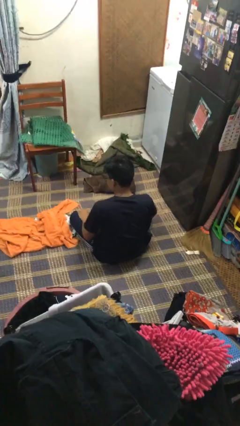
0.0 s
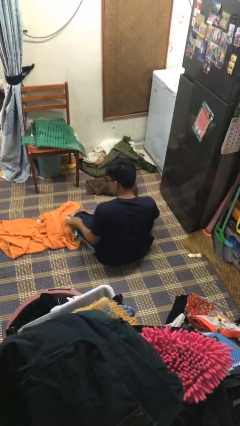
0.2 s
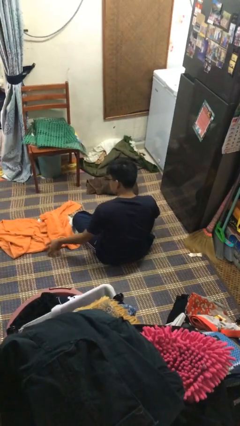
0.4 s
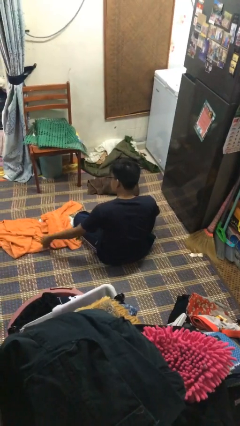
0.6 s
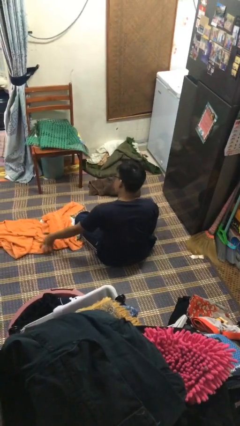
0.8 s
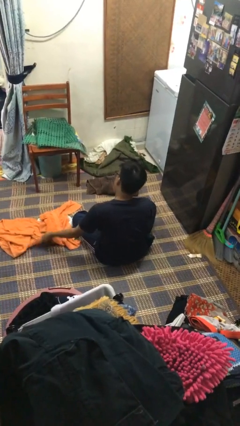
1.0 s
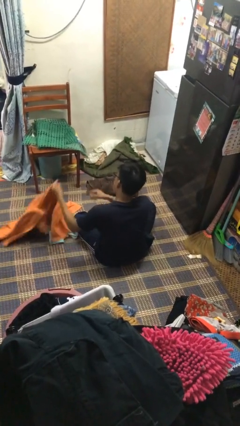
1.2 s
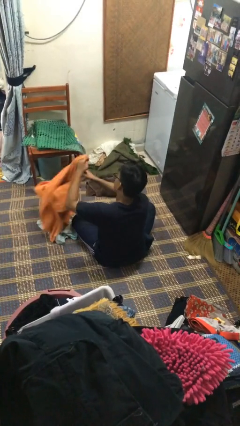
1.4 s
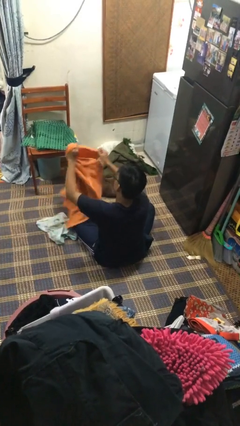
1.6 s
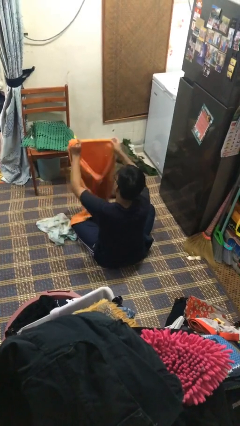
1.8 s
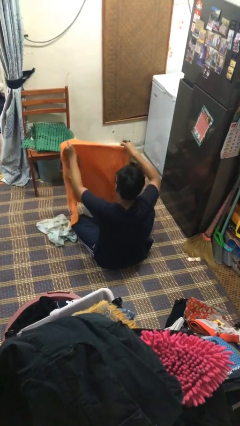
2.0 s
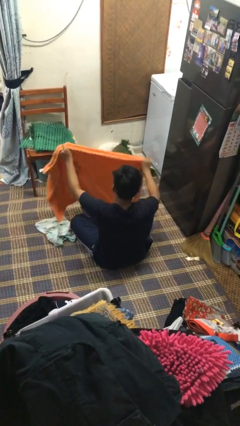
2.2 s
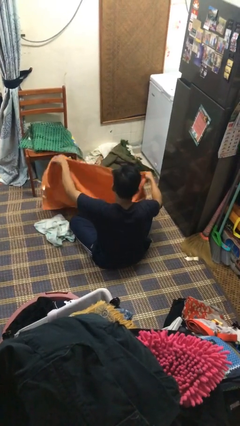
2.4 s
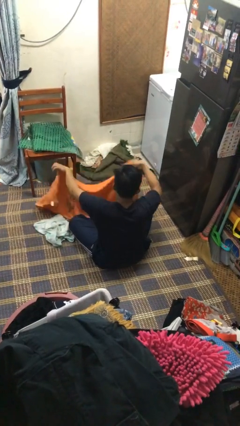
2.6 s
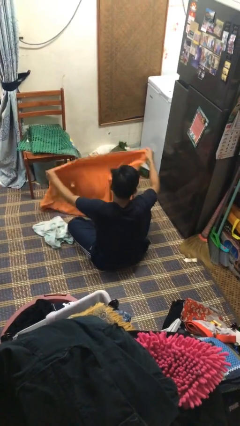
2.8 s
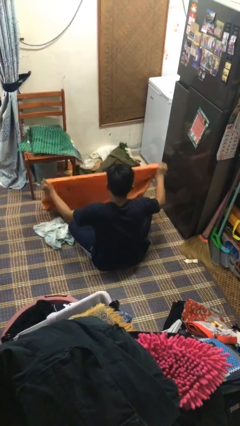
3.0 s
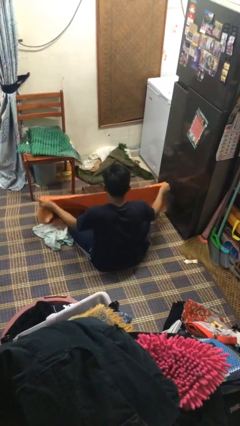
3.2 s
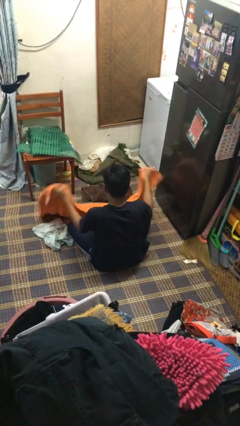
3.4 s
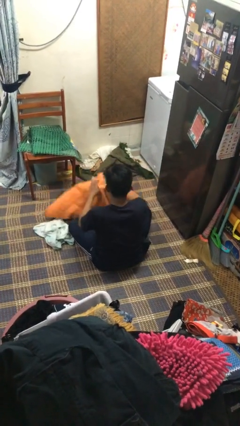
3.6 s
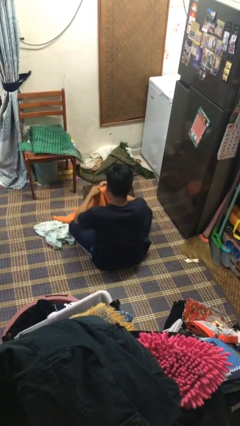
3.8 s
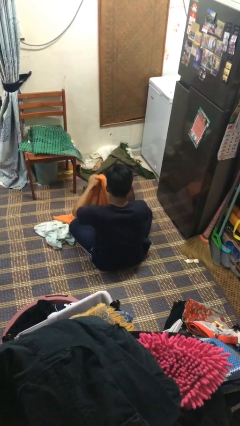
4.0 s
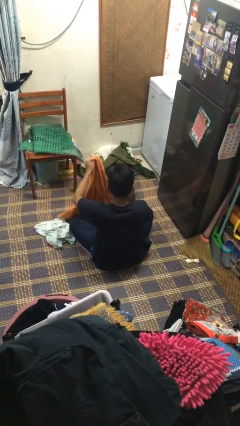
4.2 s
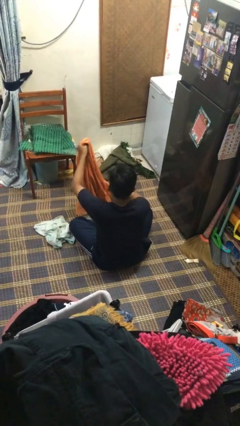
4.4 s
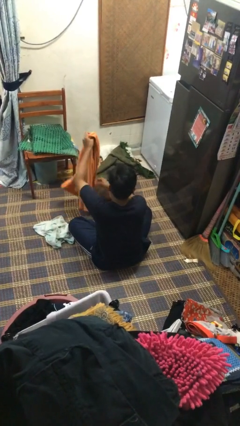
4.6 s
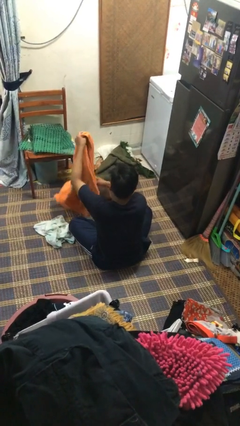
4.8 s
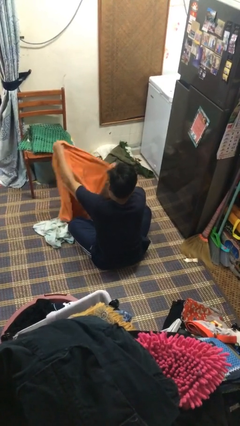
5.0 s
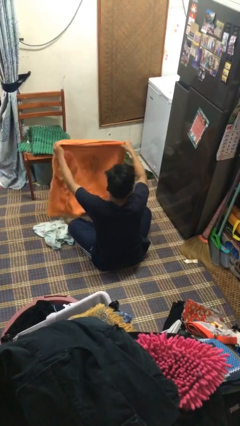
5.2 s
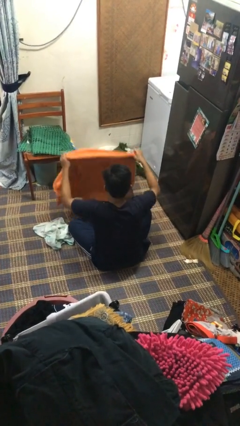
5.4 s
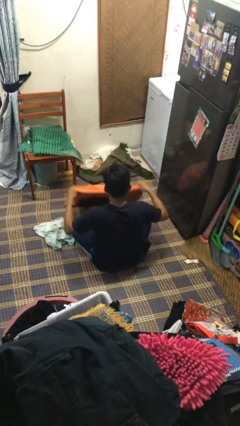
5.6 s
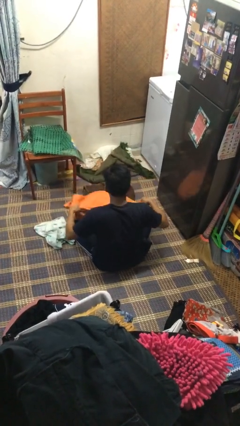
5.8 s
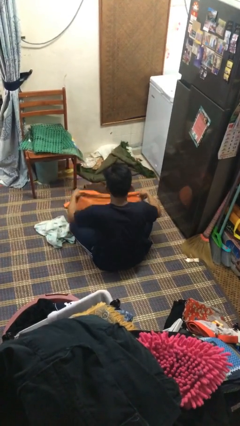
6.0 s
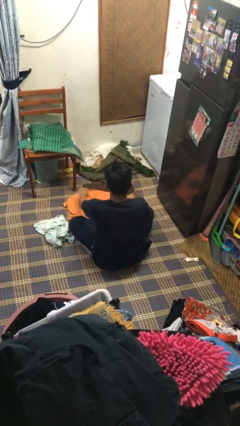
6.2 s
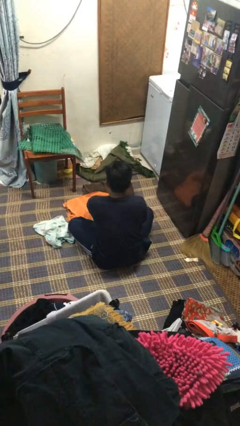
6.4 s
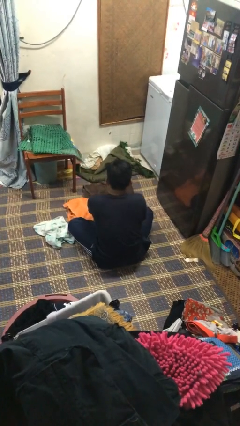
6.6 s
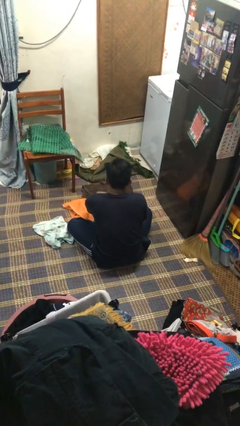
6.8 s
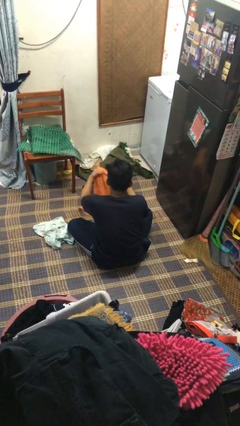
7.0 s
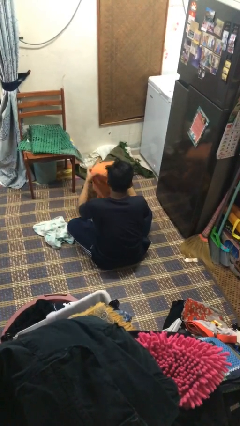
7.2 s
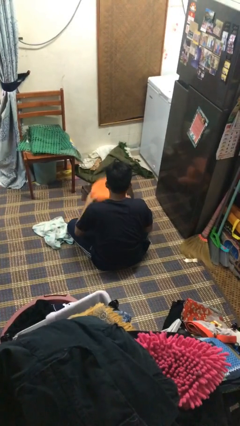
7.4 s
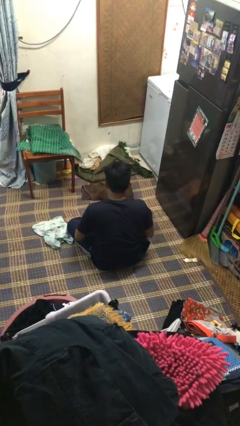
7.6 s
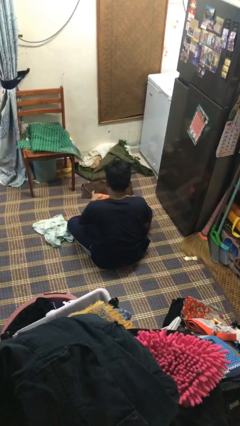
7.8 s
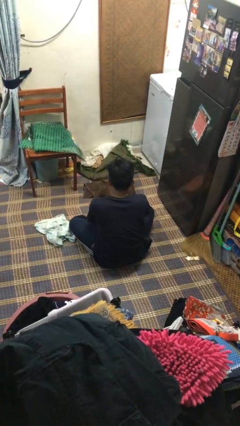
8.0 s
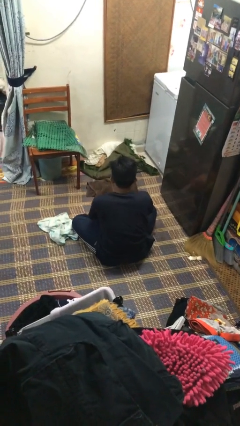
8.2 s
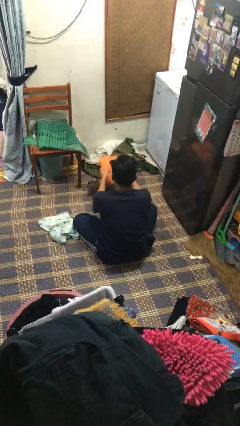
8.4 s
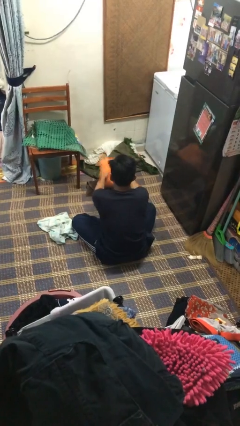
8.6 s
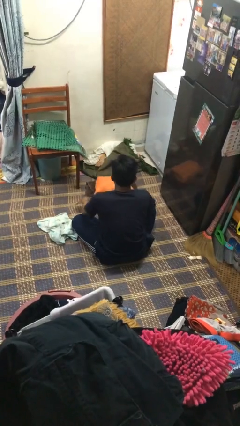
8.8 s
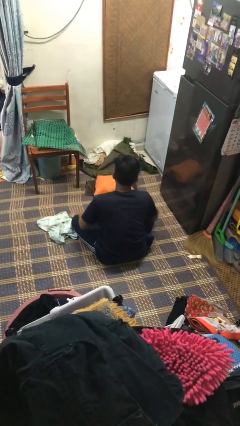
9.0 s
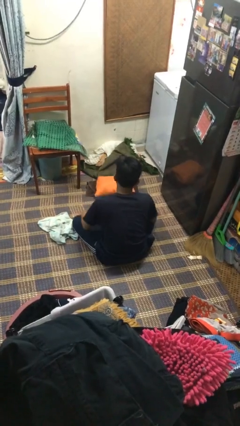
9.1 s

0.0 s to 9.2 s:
person folds towel

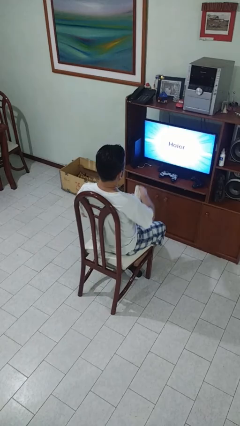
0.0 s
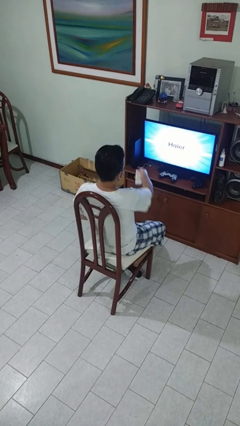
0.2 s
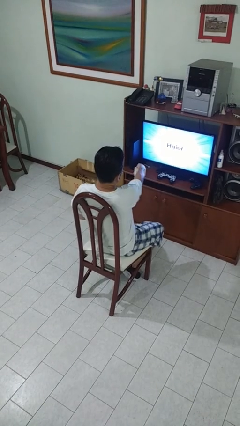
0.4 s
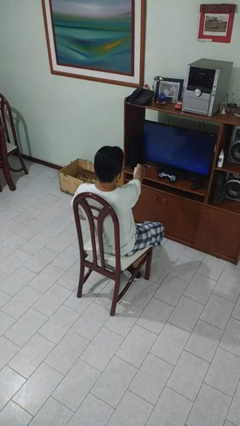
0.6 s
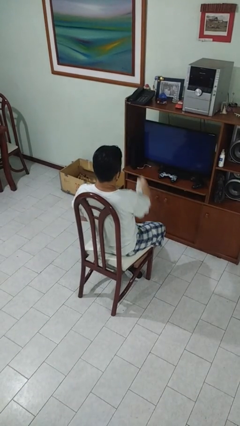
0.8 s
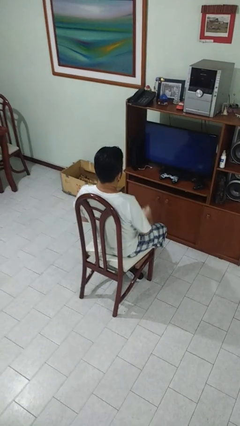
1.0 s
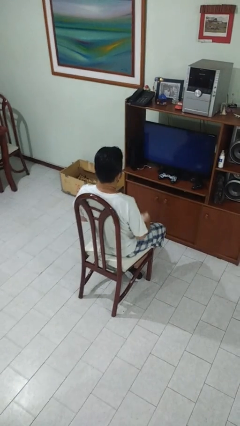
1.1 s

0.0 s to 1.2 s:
person uses television remote

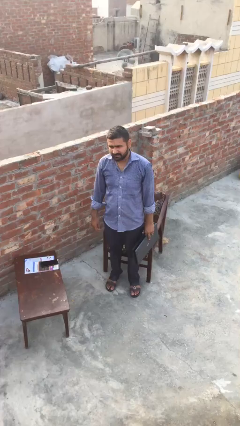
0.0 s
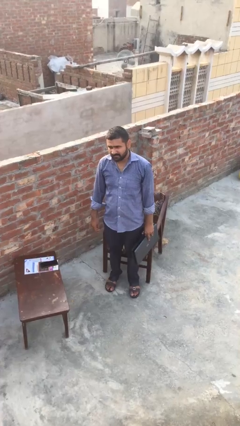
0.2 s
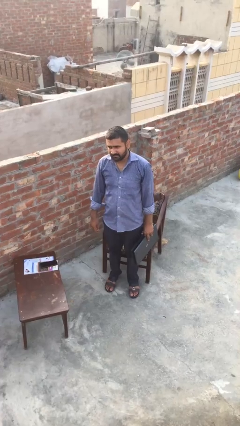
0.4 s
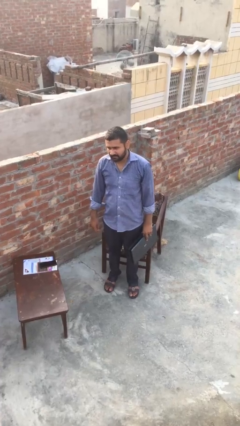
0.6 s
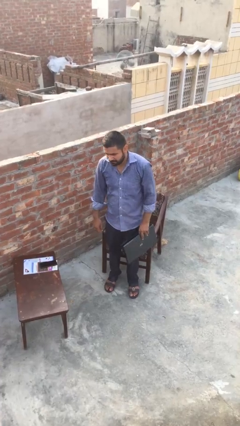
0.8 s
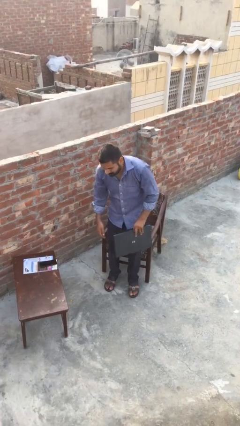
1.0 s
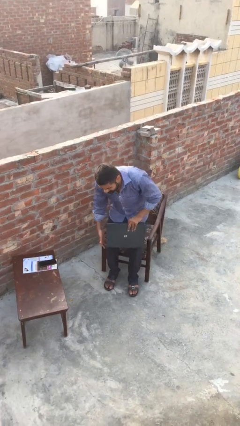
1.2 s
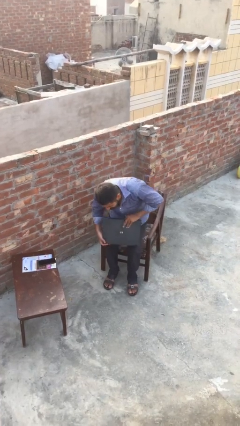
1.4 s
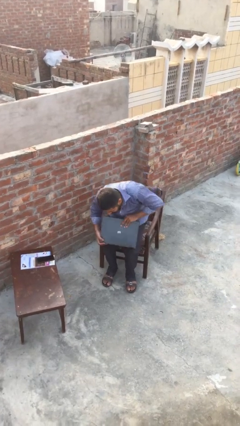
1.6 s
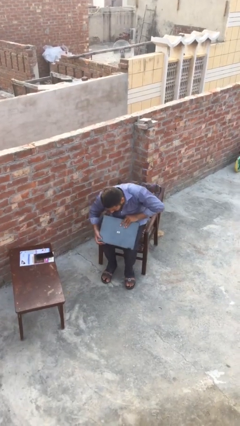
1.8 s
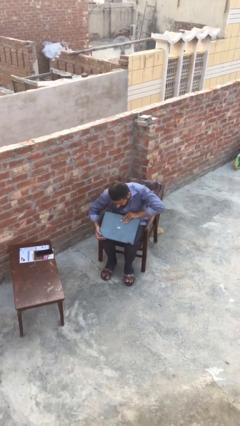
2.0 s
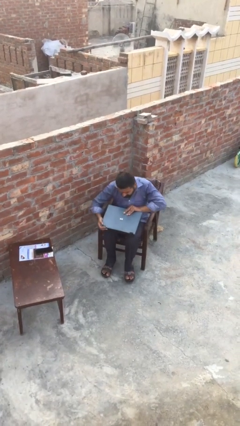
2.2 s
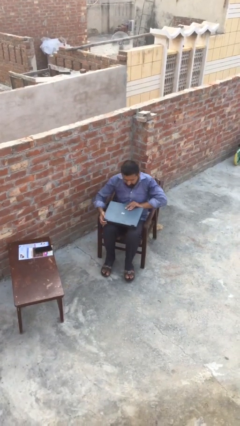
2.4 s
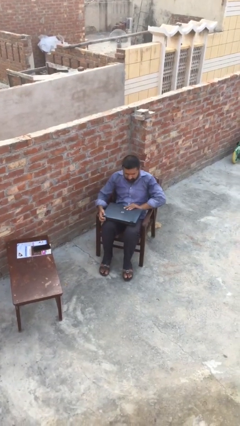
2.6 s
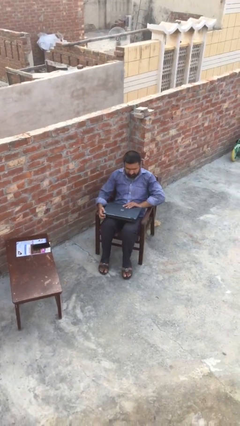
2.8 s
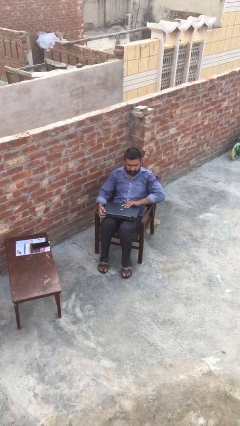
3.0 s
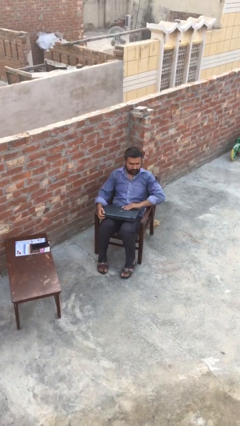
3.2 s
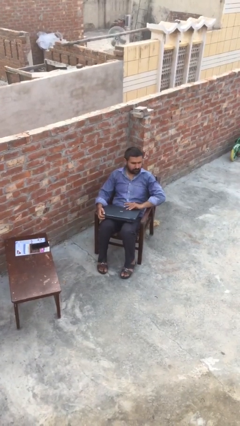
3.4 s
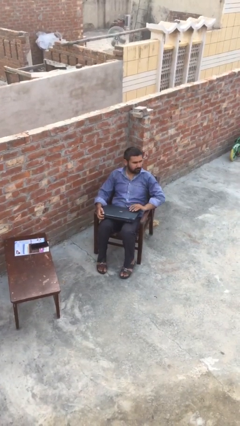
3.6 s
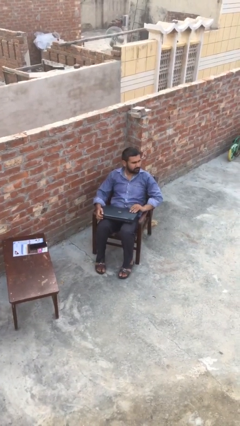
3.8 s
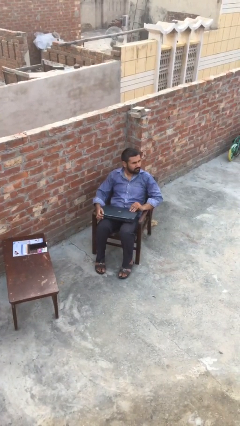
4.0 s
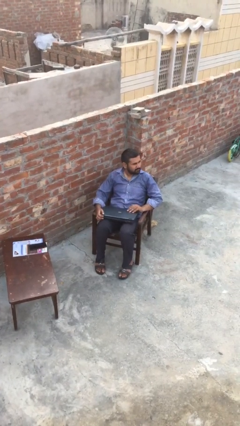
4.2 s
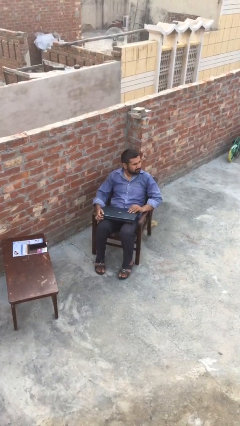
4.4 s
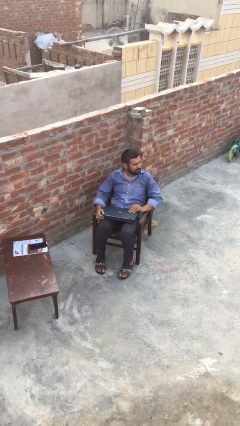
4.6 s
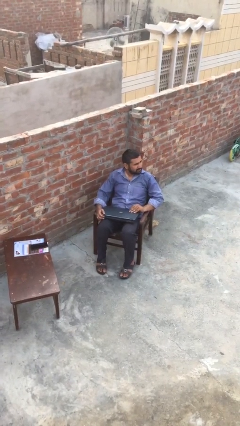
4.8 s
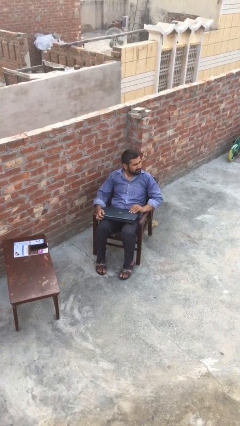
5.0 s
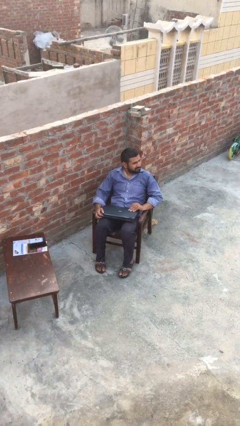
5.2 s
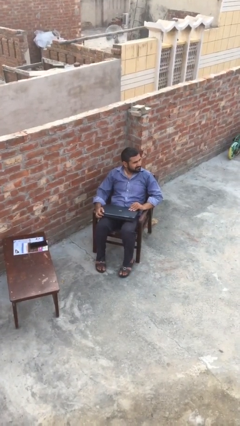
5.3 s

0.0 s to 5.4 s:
person sits down

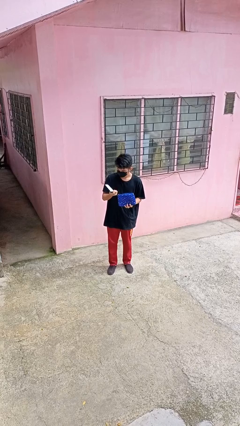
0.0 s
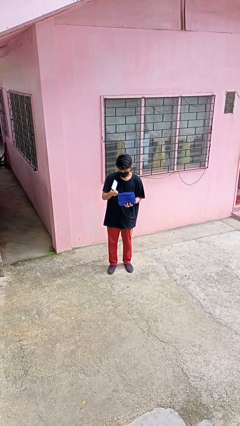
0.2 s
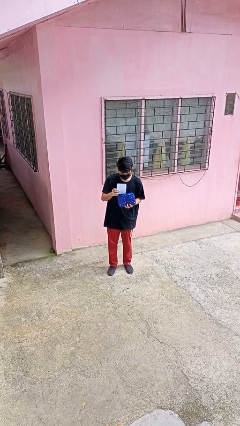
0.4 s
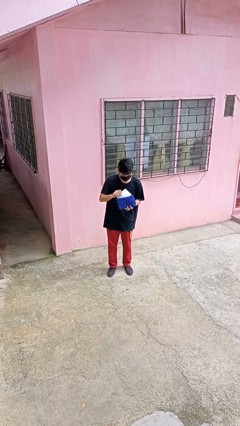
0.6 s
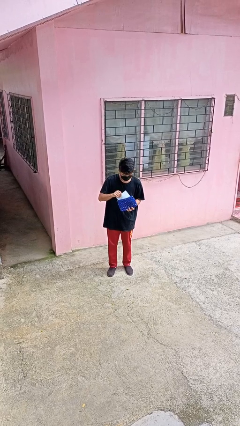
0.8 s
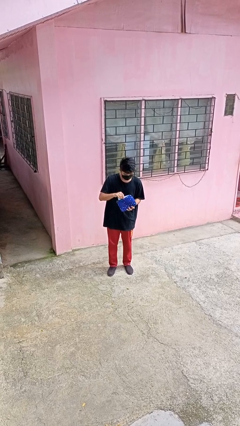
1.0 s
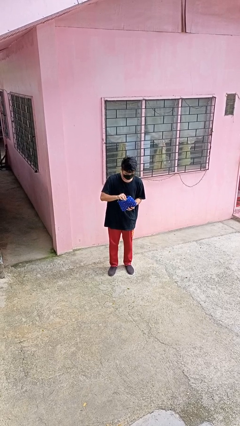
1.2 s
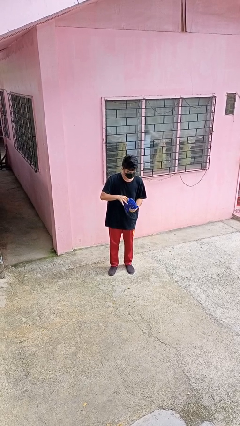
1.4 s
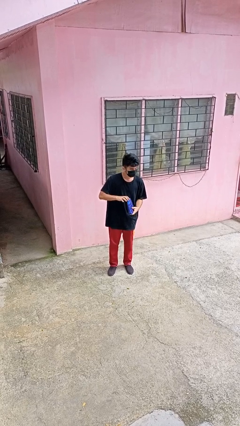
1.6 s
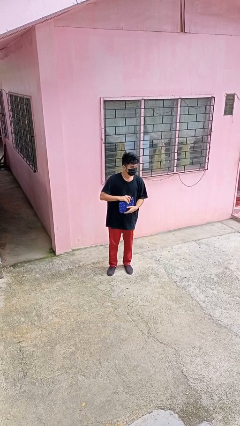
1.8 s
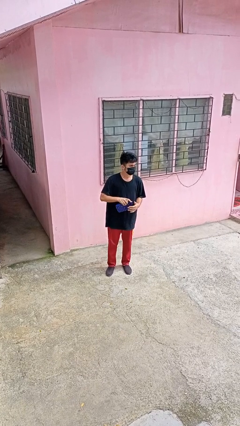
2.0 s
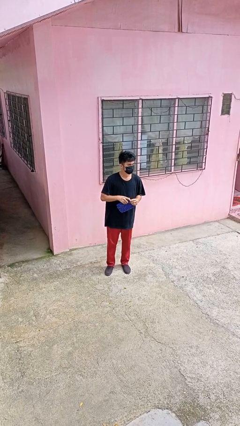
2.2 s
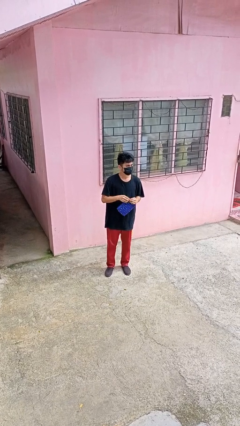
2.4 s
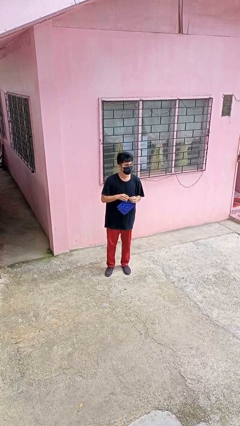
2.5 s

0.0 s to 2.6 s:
person puts object into purse
